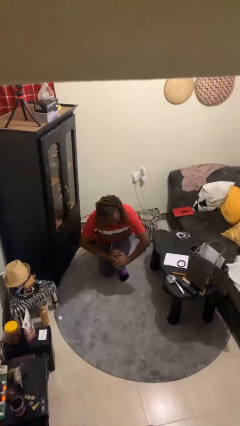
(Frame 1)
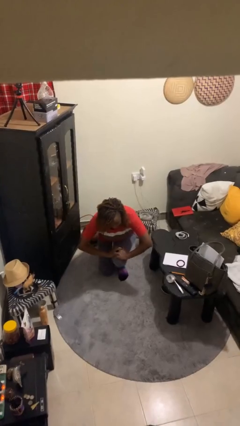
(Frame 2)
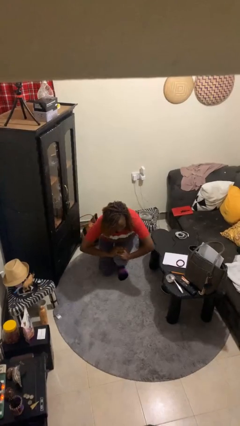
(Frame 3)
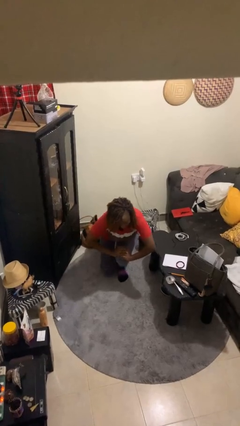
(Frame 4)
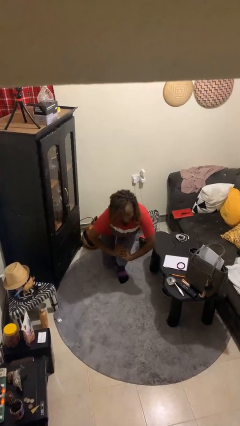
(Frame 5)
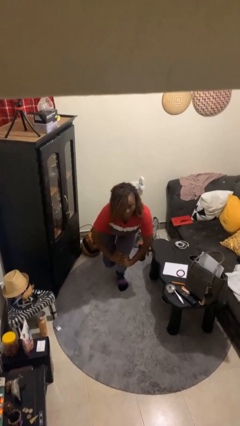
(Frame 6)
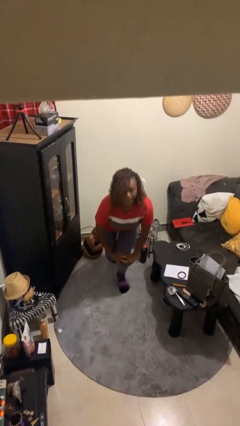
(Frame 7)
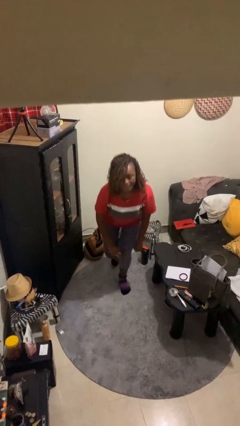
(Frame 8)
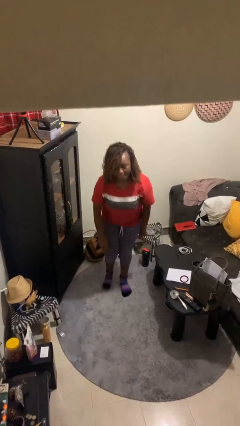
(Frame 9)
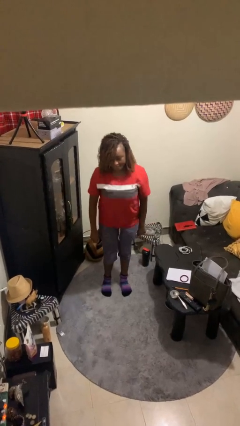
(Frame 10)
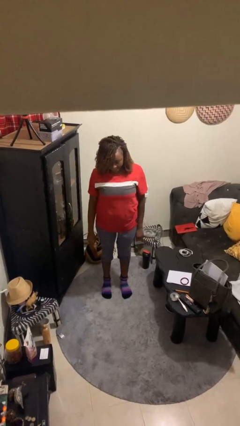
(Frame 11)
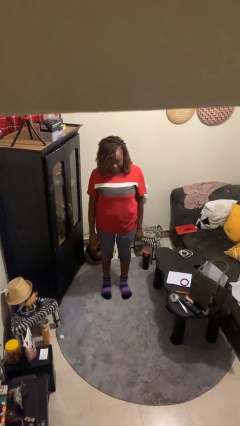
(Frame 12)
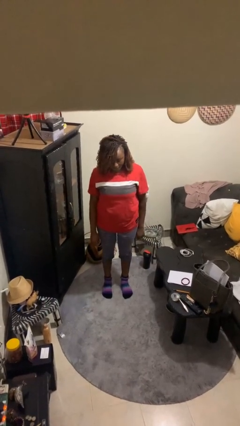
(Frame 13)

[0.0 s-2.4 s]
person stands up from floor

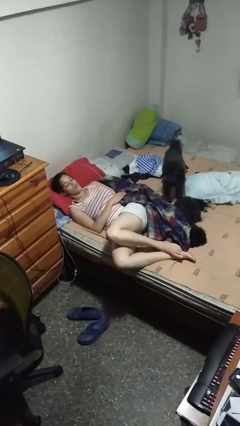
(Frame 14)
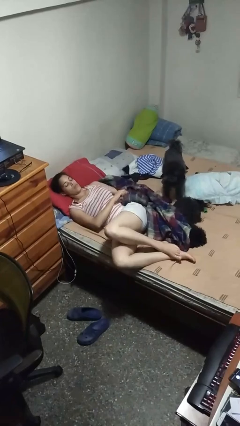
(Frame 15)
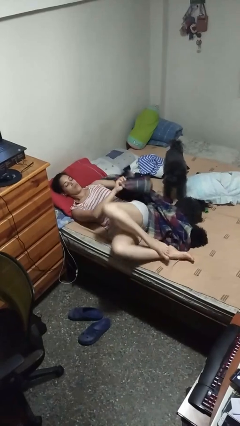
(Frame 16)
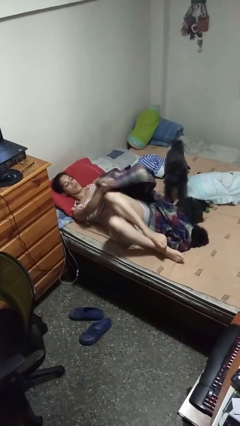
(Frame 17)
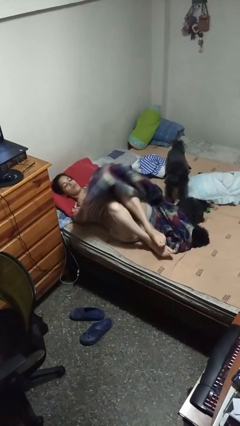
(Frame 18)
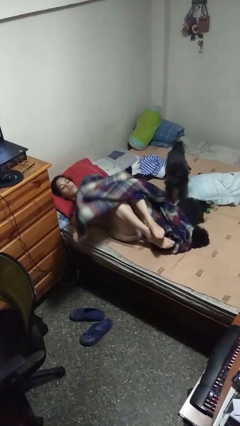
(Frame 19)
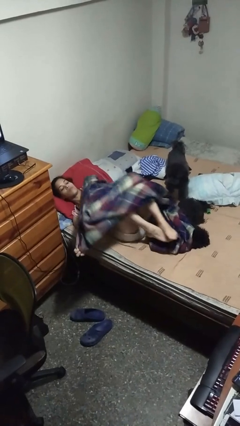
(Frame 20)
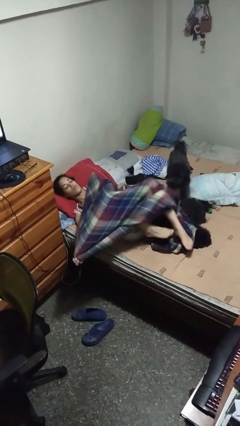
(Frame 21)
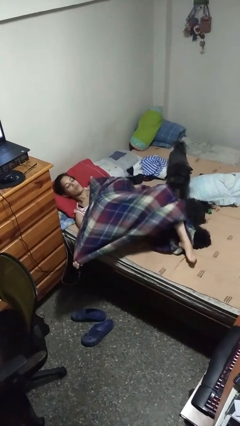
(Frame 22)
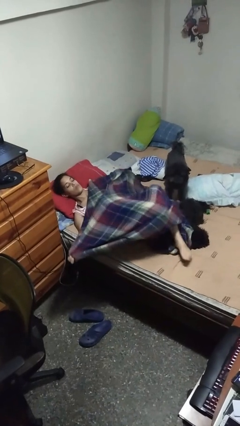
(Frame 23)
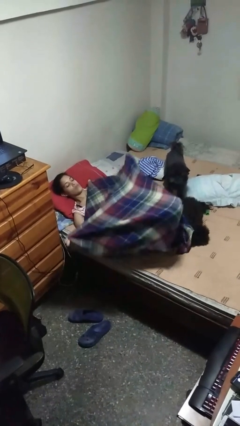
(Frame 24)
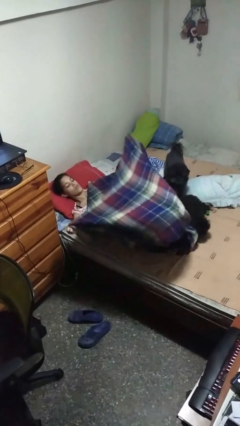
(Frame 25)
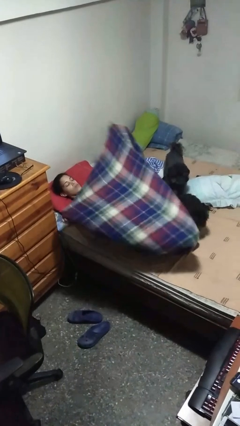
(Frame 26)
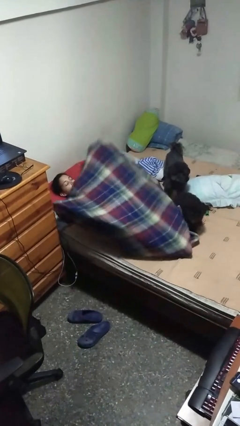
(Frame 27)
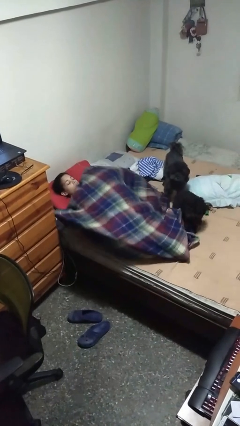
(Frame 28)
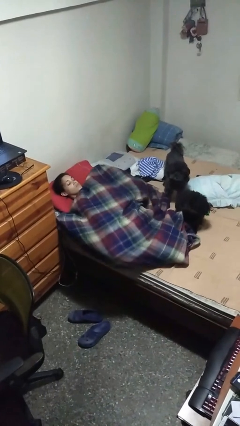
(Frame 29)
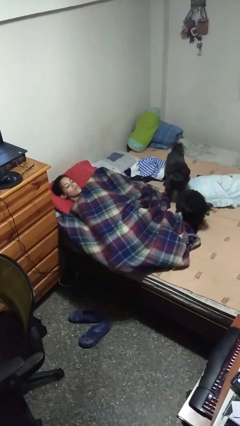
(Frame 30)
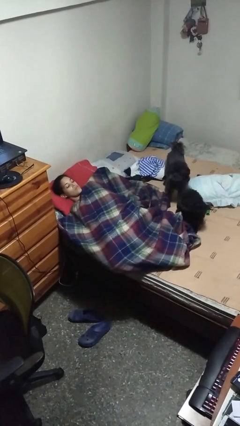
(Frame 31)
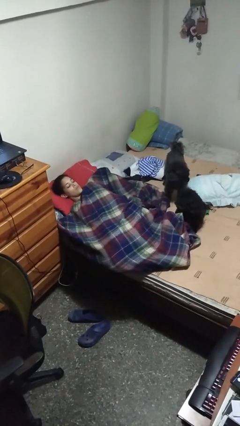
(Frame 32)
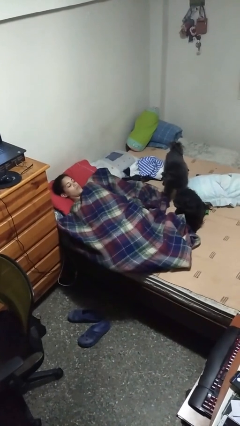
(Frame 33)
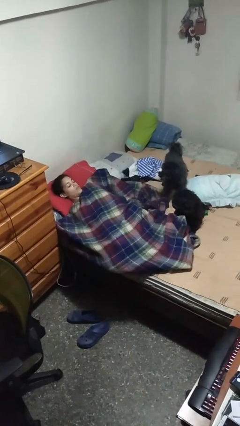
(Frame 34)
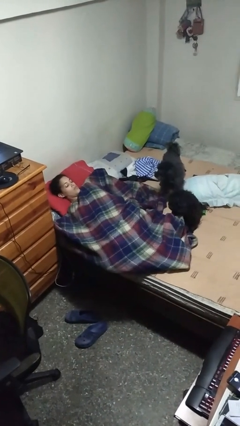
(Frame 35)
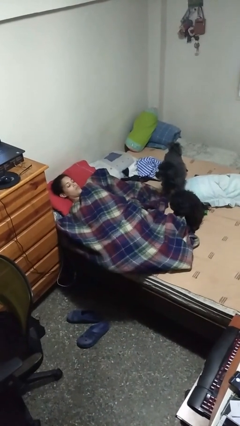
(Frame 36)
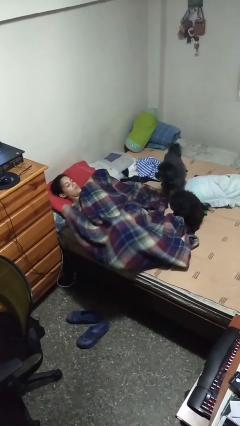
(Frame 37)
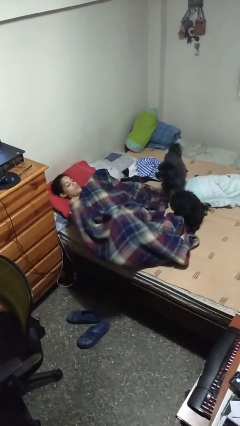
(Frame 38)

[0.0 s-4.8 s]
person covers with bedsheets

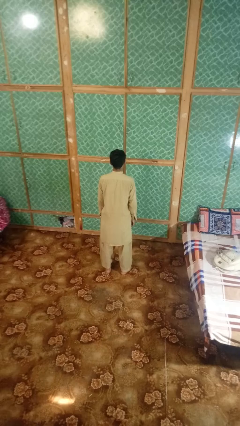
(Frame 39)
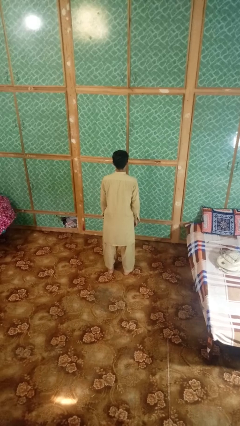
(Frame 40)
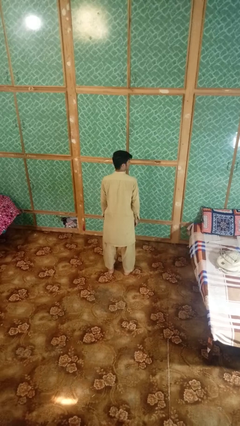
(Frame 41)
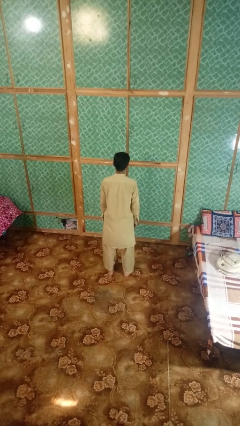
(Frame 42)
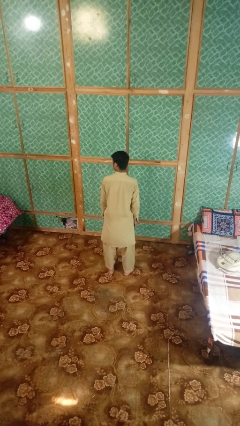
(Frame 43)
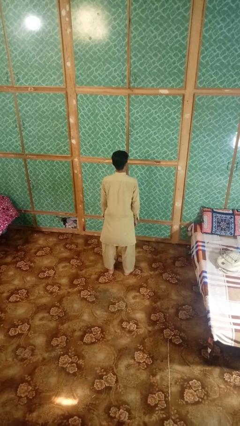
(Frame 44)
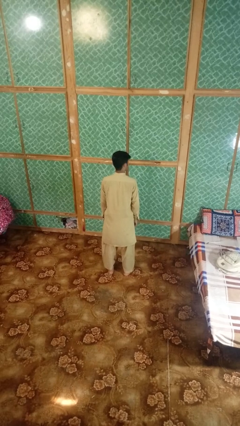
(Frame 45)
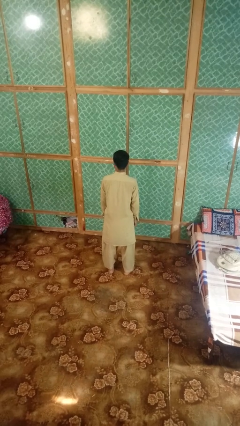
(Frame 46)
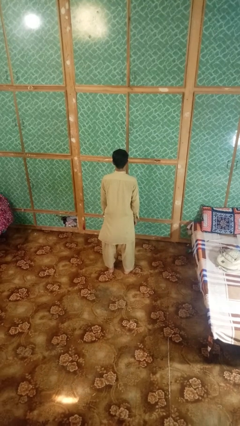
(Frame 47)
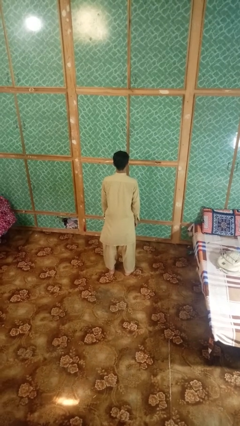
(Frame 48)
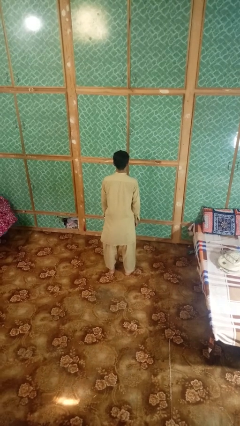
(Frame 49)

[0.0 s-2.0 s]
person nods head

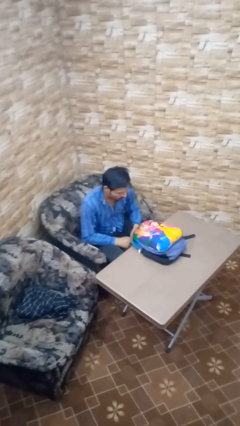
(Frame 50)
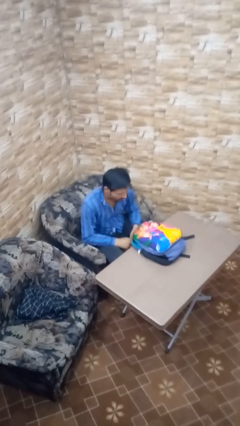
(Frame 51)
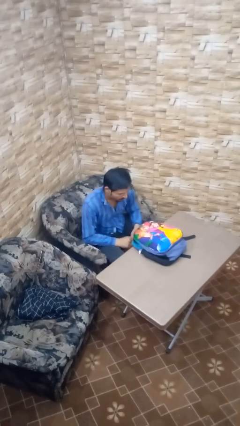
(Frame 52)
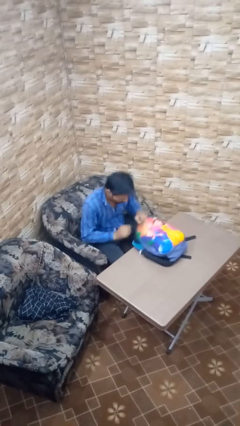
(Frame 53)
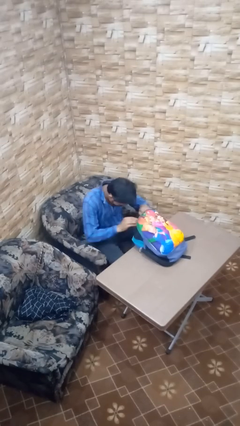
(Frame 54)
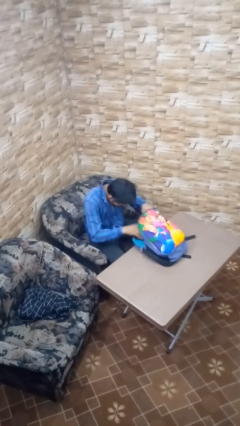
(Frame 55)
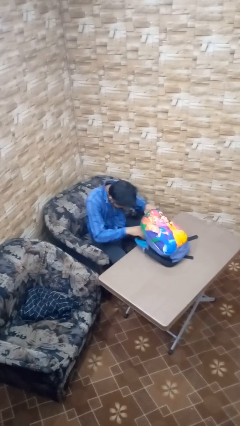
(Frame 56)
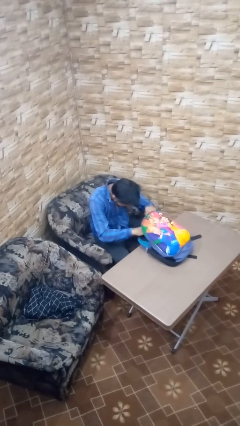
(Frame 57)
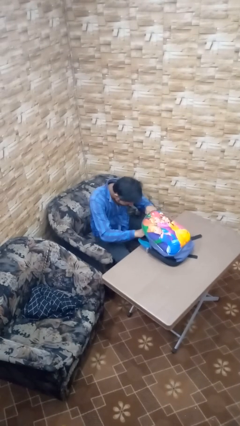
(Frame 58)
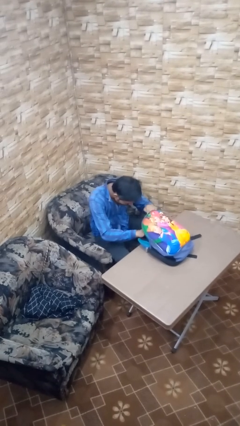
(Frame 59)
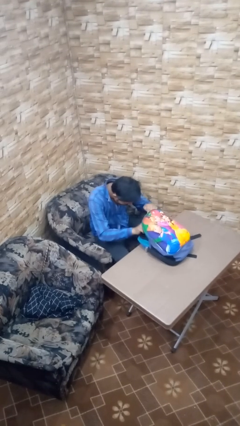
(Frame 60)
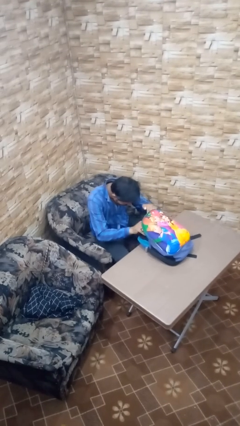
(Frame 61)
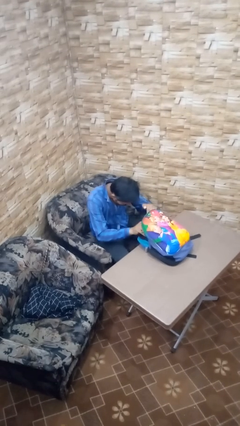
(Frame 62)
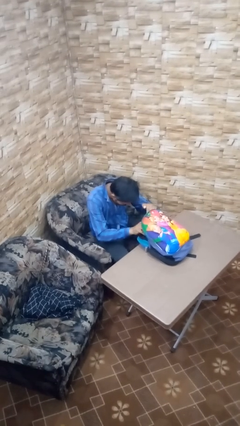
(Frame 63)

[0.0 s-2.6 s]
person searches in backpack

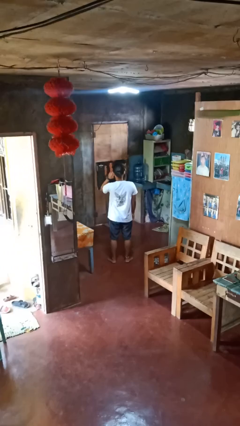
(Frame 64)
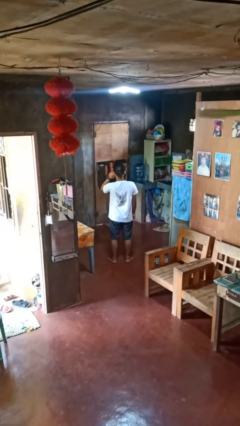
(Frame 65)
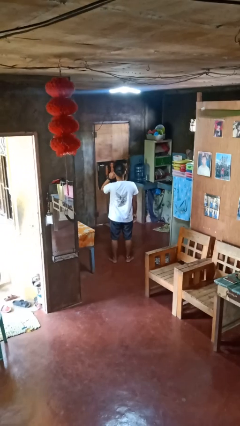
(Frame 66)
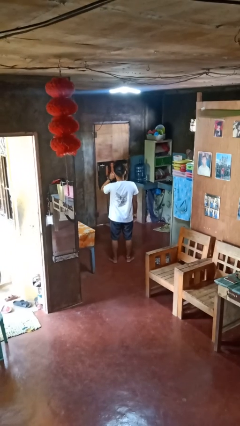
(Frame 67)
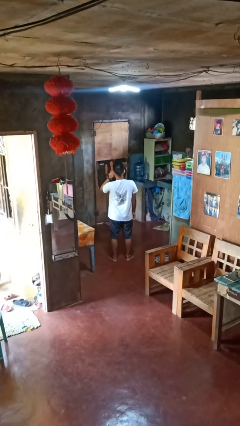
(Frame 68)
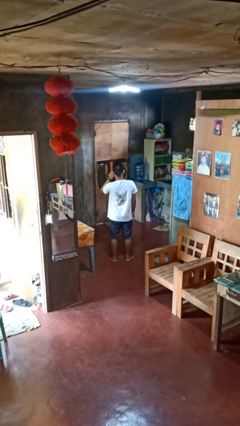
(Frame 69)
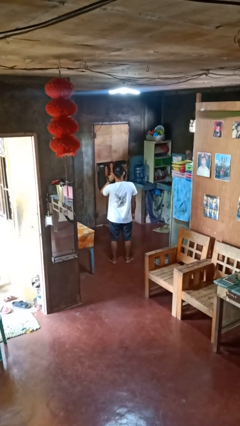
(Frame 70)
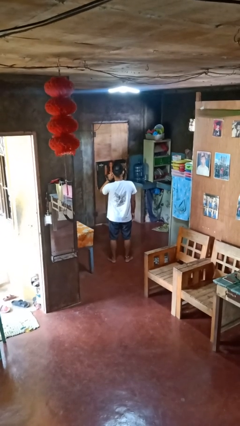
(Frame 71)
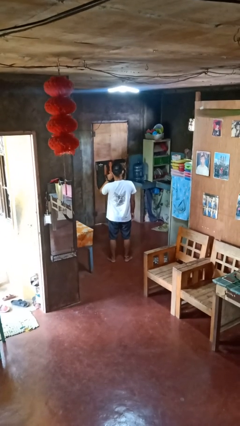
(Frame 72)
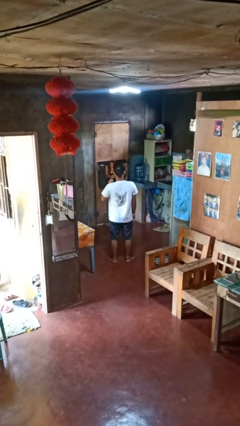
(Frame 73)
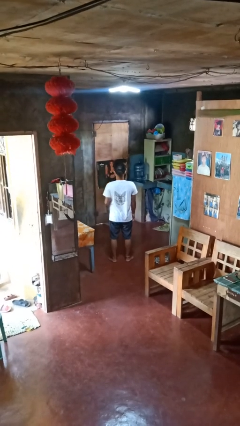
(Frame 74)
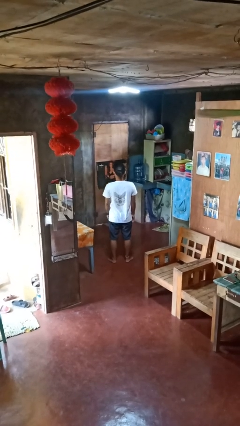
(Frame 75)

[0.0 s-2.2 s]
person touches earlobe

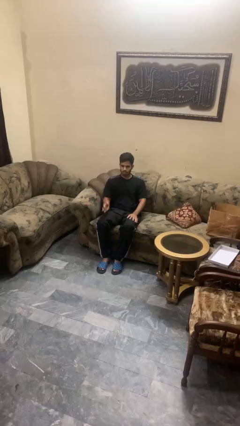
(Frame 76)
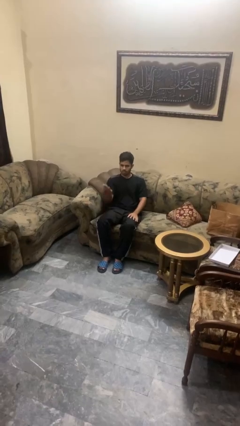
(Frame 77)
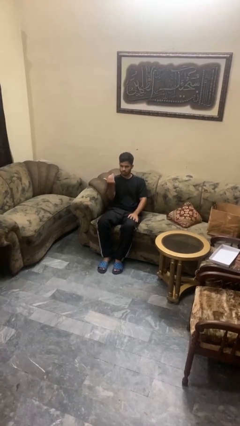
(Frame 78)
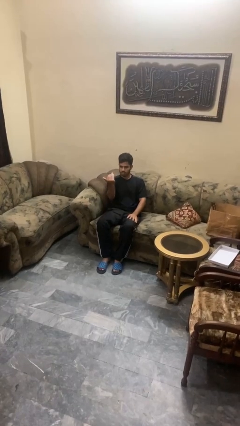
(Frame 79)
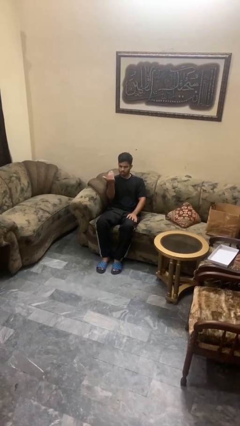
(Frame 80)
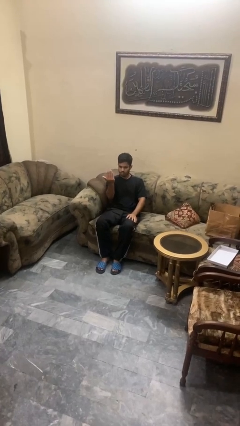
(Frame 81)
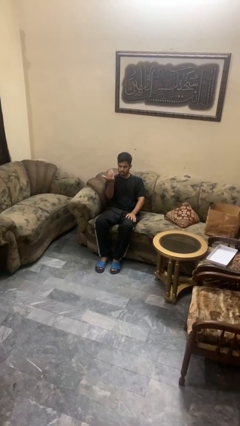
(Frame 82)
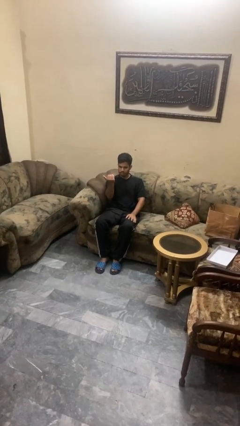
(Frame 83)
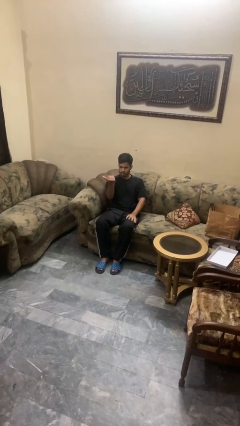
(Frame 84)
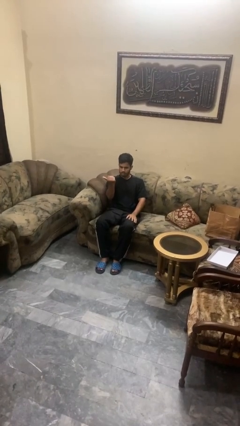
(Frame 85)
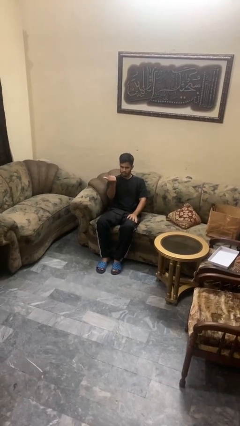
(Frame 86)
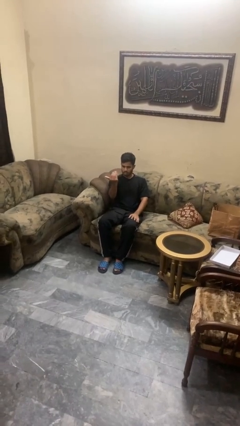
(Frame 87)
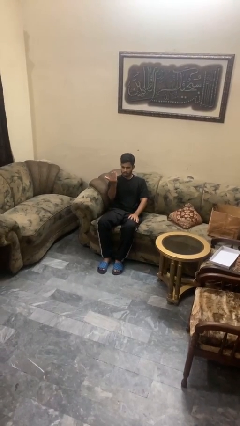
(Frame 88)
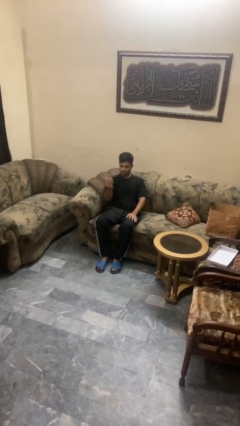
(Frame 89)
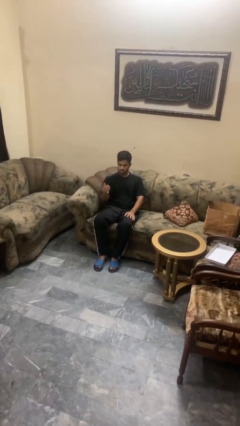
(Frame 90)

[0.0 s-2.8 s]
person gestures come here

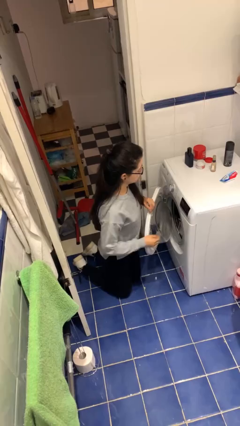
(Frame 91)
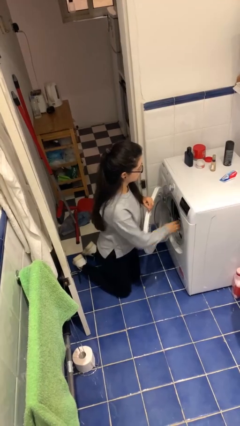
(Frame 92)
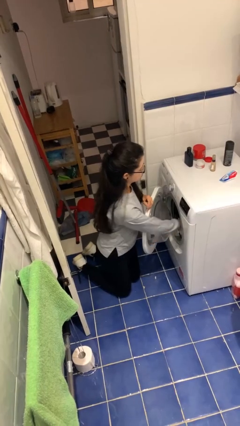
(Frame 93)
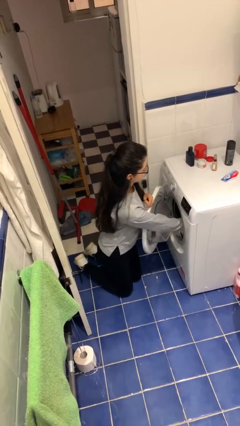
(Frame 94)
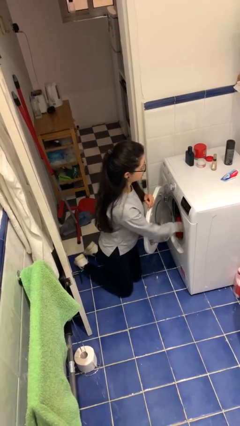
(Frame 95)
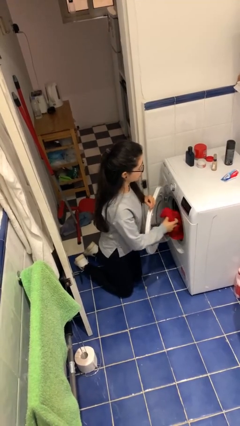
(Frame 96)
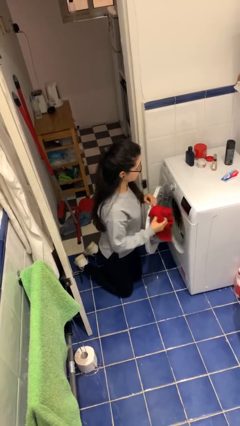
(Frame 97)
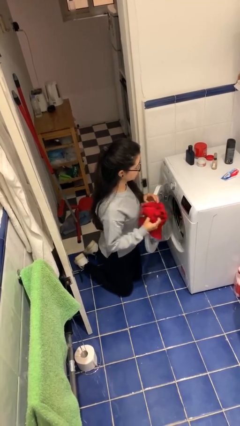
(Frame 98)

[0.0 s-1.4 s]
person unloads dryer
